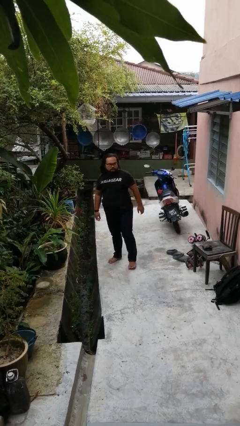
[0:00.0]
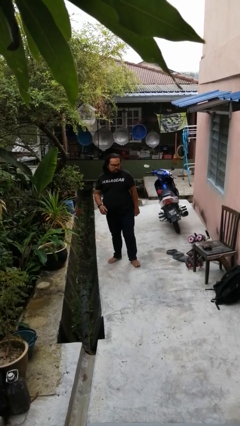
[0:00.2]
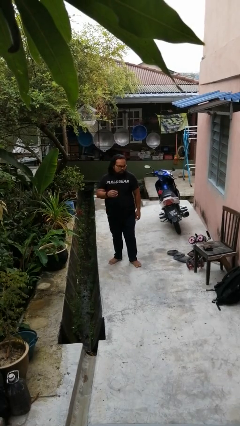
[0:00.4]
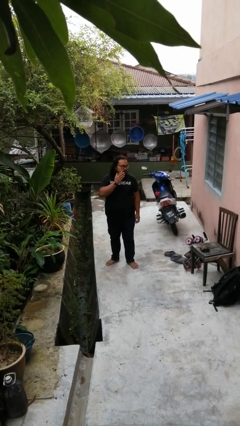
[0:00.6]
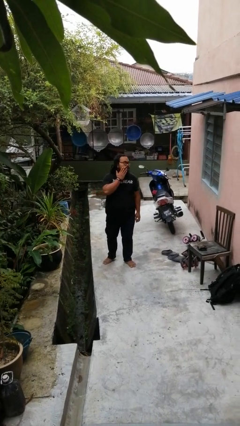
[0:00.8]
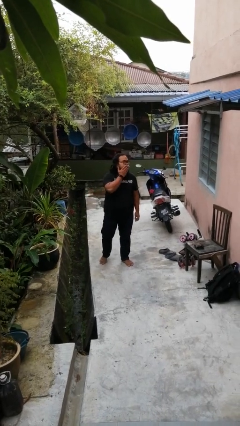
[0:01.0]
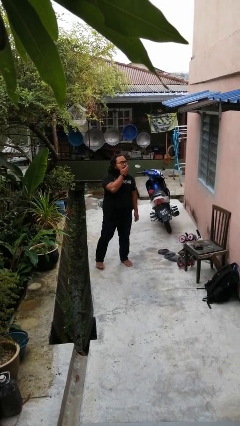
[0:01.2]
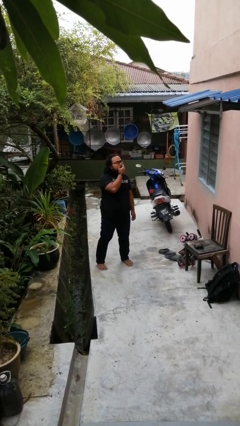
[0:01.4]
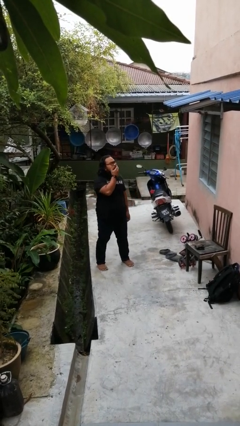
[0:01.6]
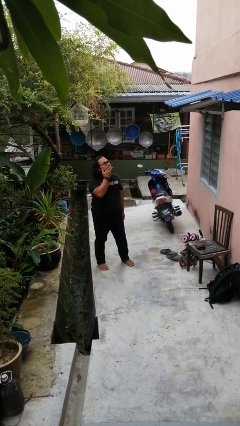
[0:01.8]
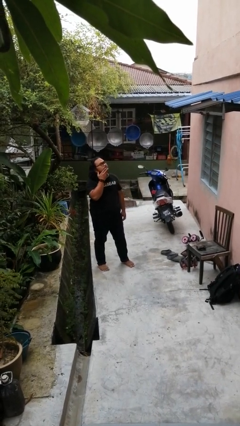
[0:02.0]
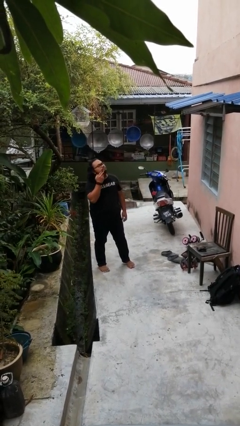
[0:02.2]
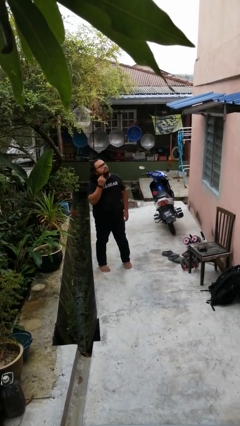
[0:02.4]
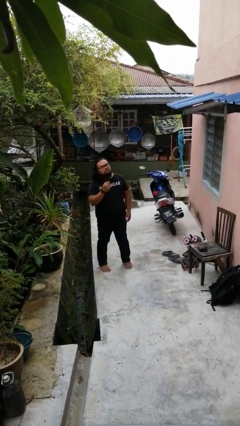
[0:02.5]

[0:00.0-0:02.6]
person scratches face

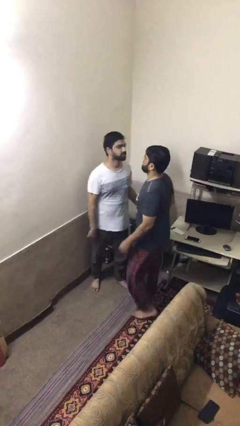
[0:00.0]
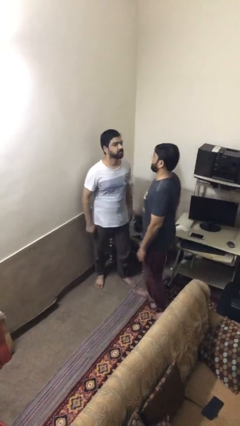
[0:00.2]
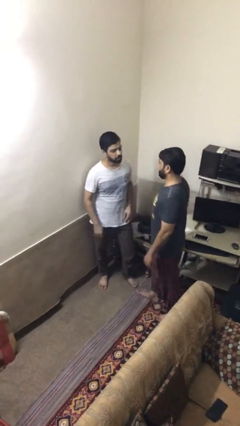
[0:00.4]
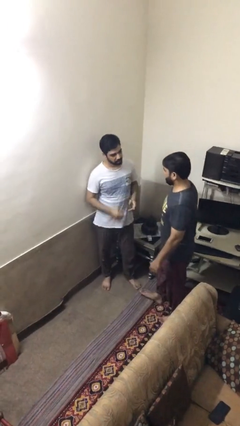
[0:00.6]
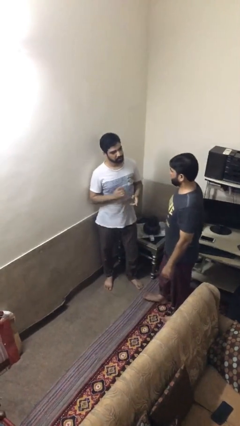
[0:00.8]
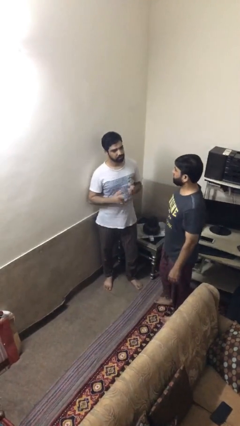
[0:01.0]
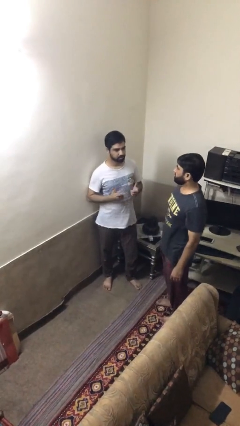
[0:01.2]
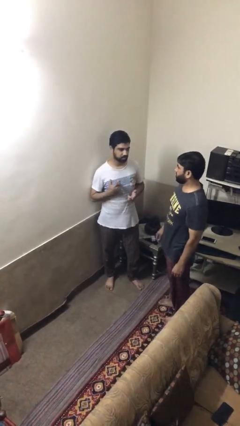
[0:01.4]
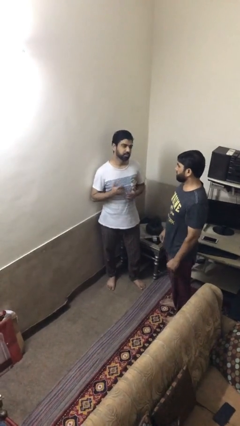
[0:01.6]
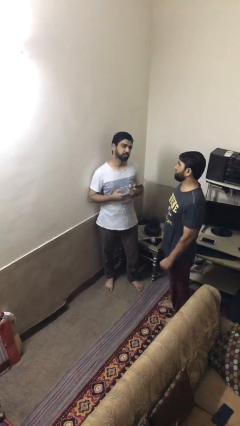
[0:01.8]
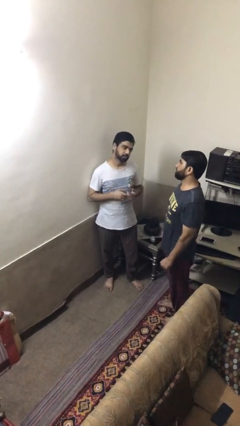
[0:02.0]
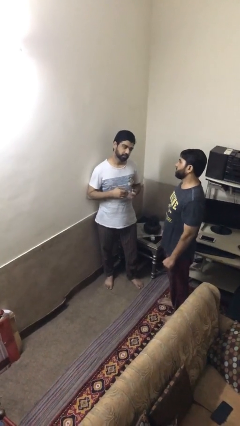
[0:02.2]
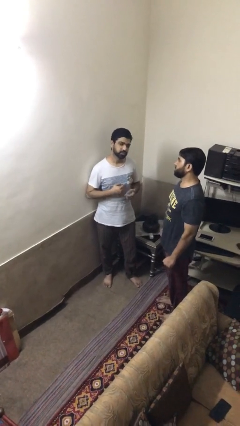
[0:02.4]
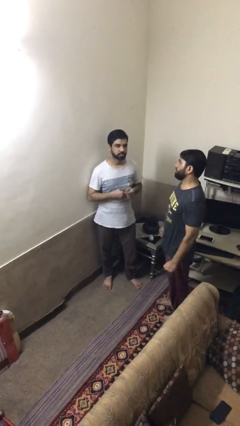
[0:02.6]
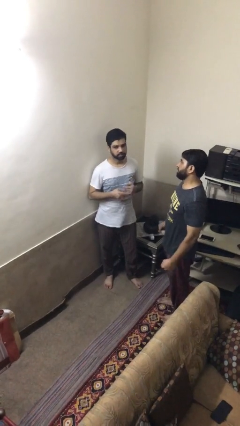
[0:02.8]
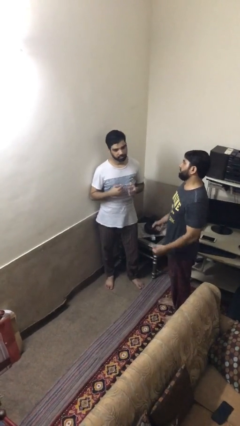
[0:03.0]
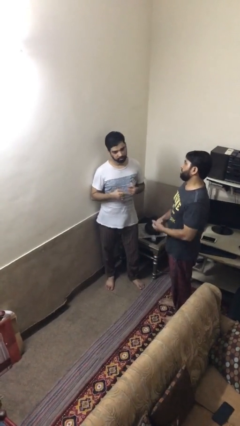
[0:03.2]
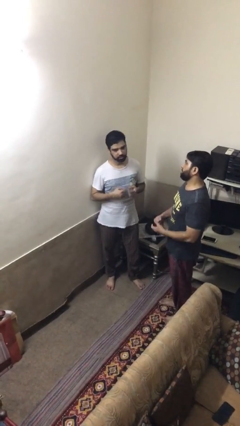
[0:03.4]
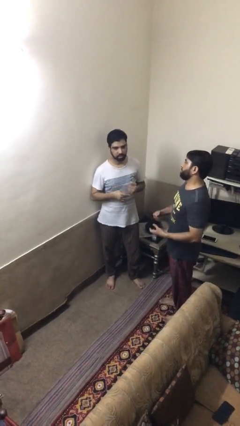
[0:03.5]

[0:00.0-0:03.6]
person talks to person

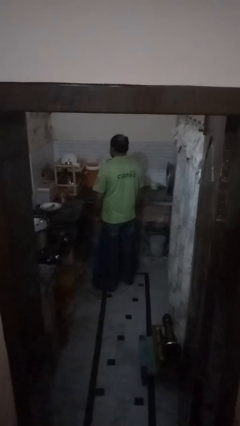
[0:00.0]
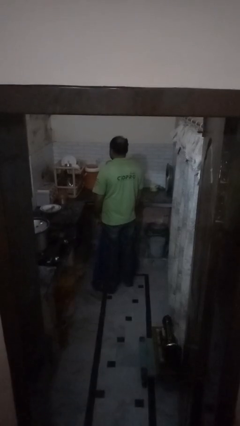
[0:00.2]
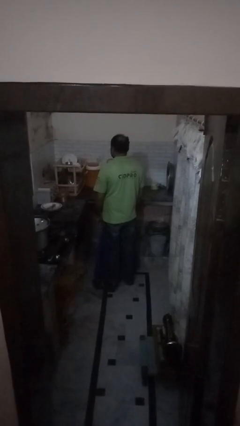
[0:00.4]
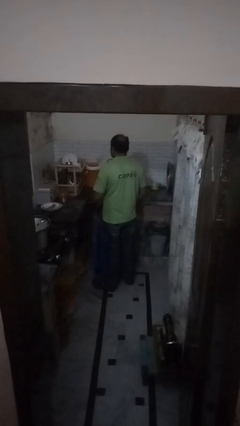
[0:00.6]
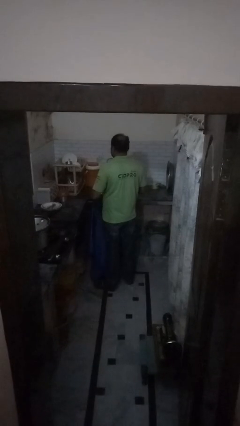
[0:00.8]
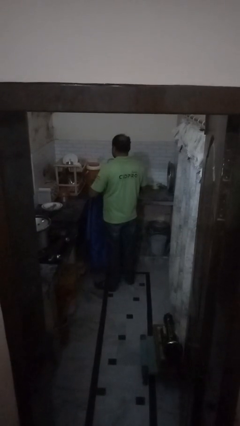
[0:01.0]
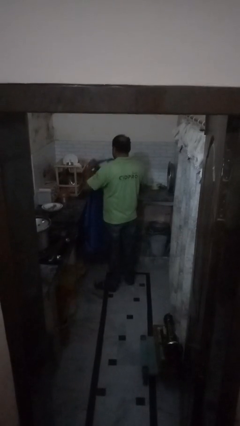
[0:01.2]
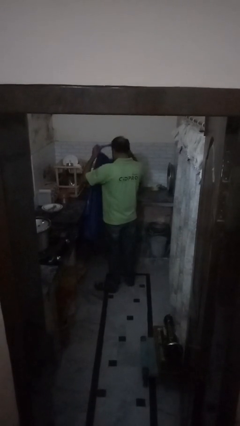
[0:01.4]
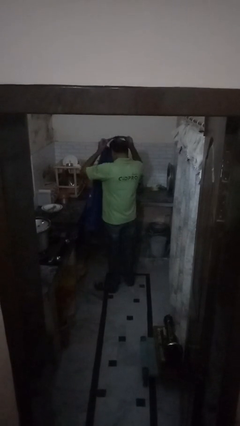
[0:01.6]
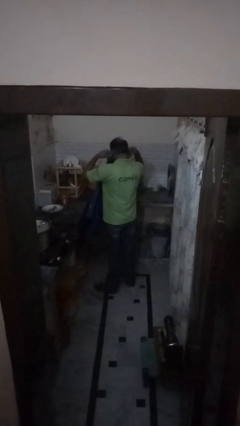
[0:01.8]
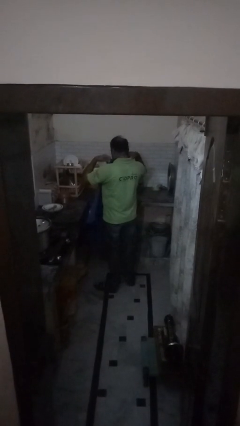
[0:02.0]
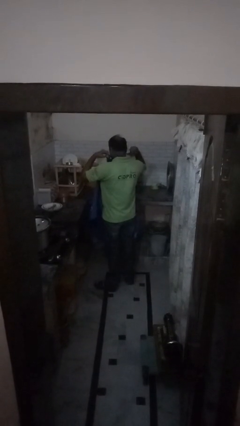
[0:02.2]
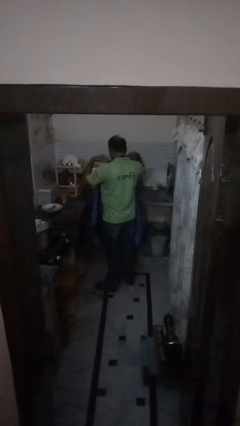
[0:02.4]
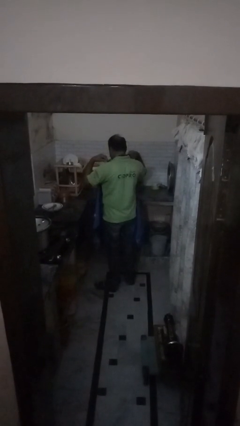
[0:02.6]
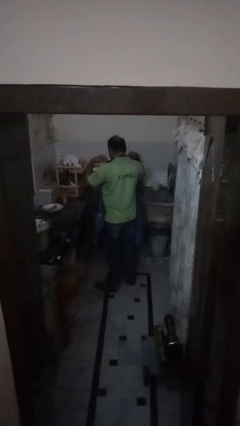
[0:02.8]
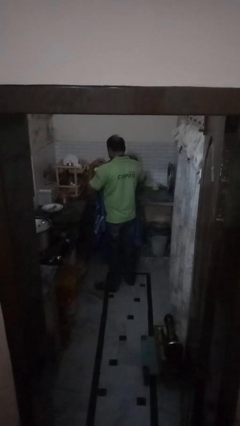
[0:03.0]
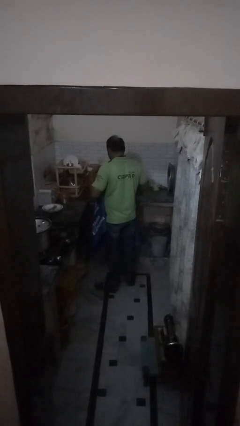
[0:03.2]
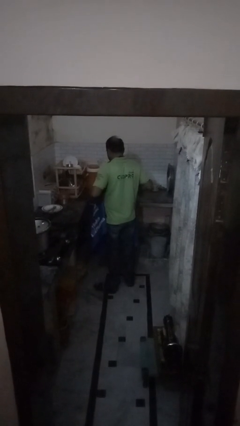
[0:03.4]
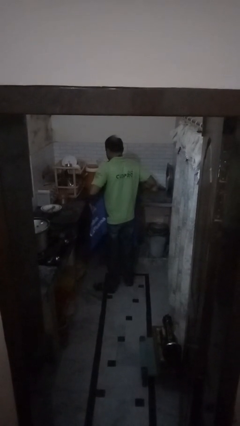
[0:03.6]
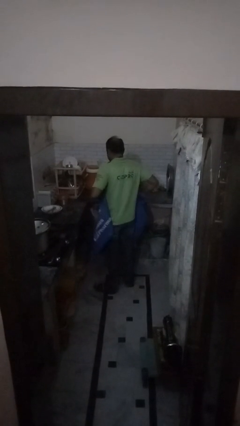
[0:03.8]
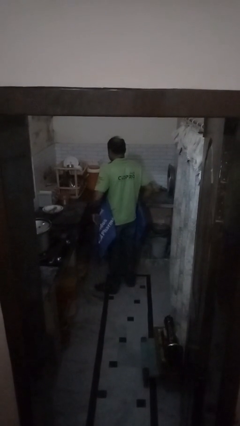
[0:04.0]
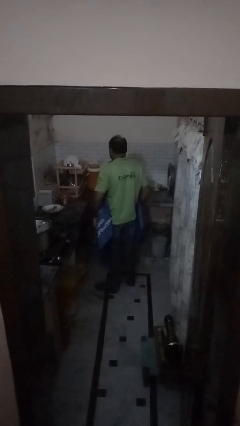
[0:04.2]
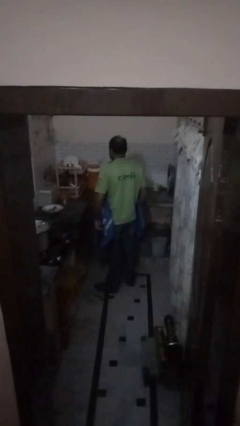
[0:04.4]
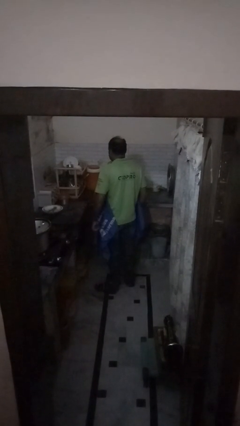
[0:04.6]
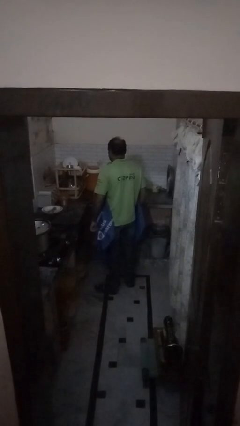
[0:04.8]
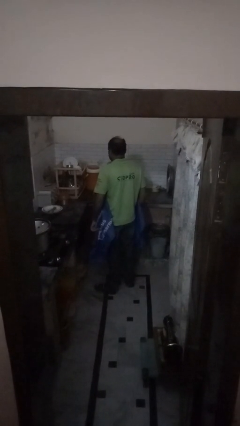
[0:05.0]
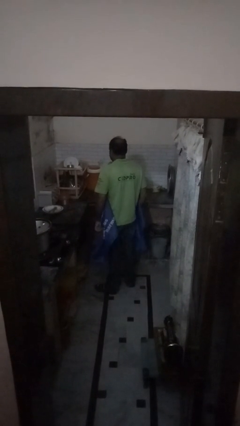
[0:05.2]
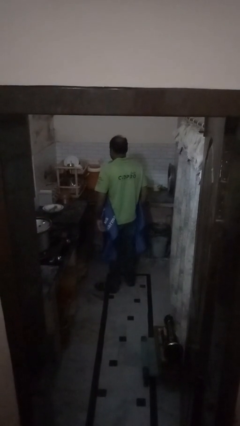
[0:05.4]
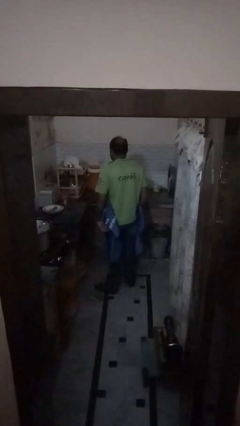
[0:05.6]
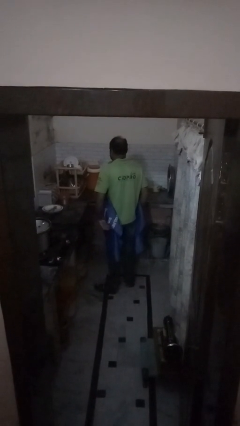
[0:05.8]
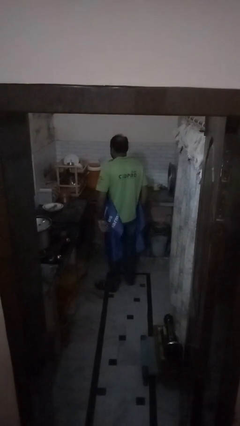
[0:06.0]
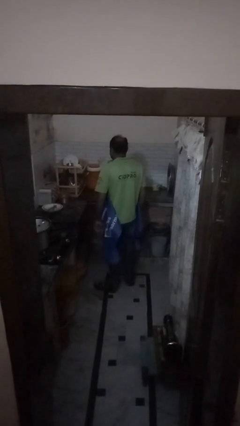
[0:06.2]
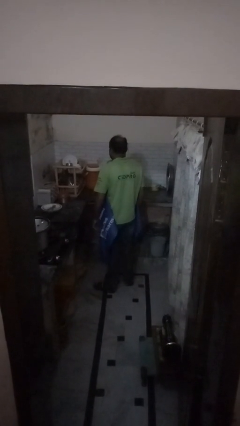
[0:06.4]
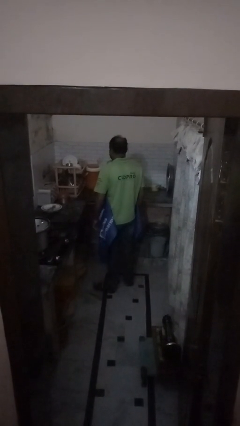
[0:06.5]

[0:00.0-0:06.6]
person puts on apron

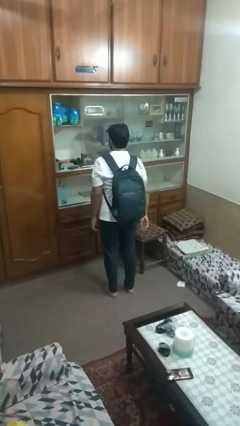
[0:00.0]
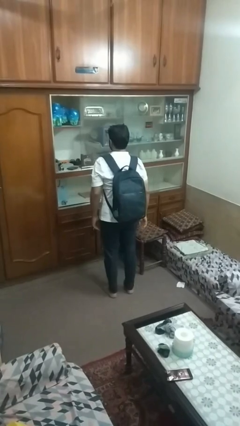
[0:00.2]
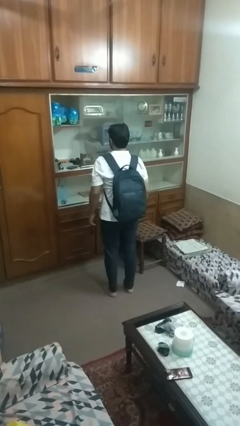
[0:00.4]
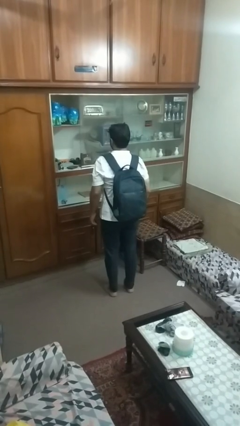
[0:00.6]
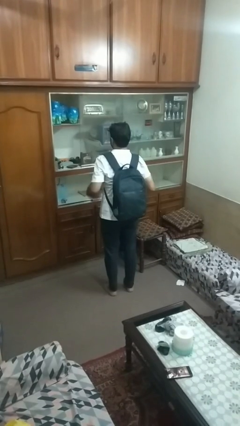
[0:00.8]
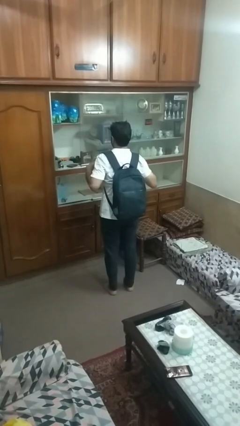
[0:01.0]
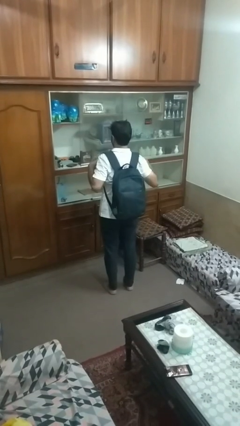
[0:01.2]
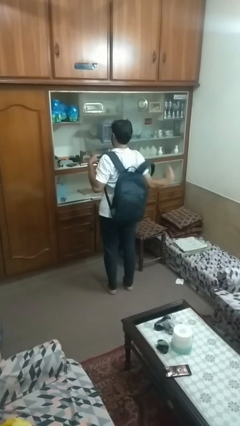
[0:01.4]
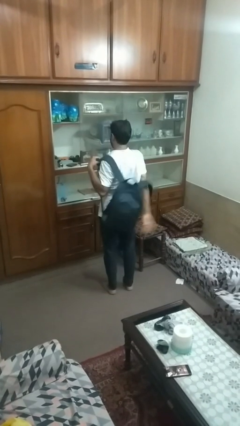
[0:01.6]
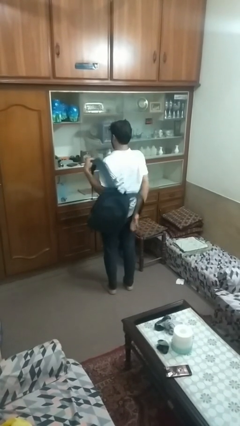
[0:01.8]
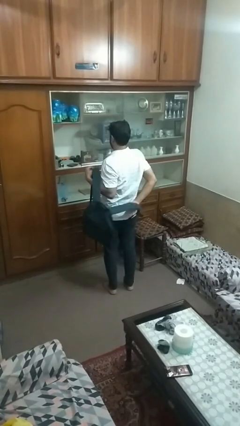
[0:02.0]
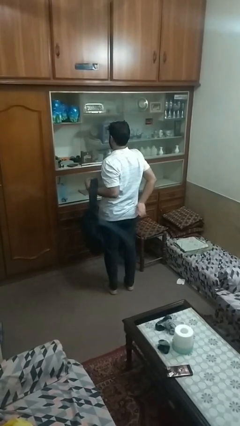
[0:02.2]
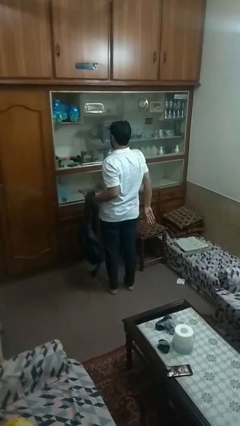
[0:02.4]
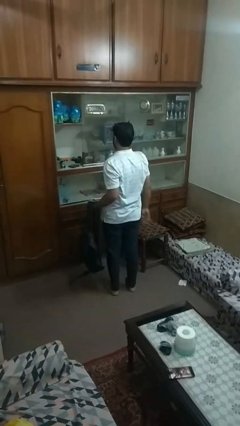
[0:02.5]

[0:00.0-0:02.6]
person takes off backpack

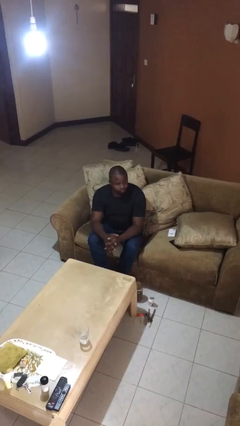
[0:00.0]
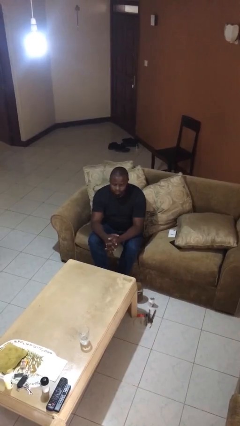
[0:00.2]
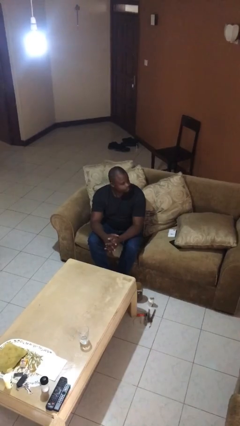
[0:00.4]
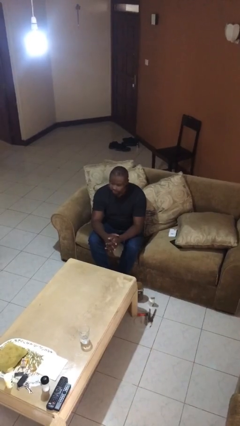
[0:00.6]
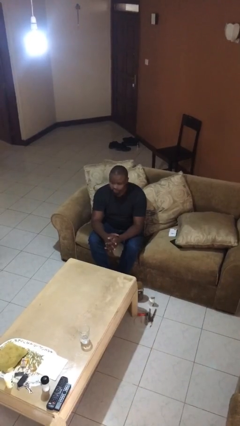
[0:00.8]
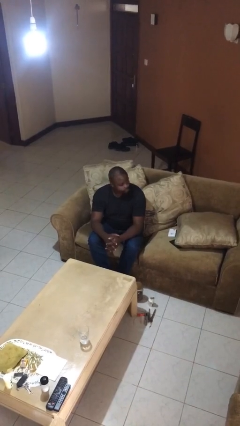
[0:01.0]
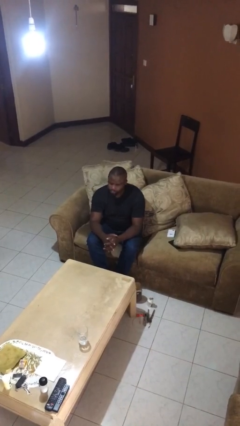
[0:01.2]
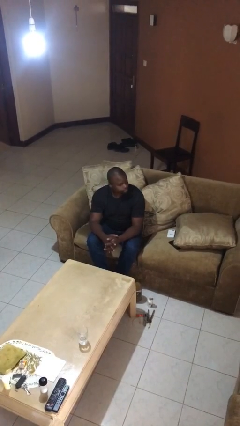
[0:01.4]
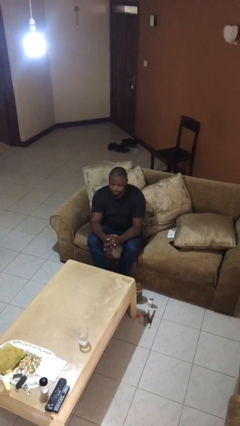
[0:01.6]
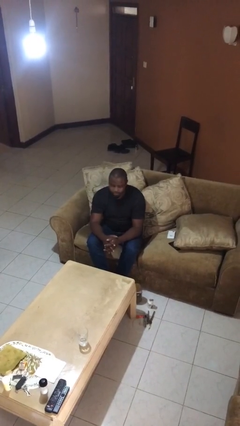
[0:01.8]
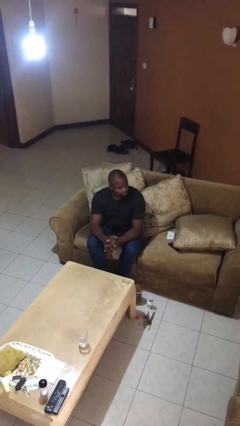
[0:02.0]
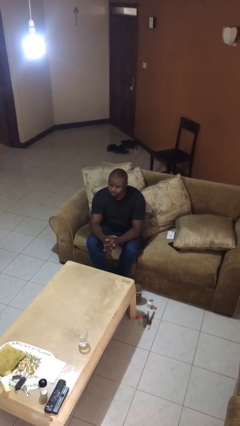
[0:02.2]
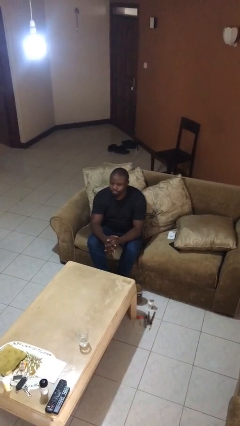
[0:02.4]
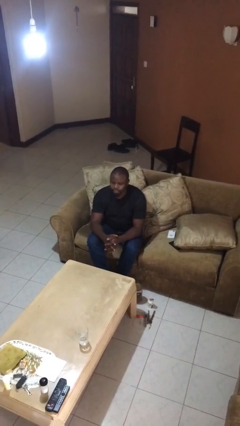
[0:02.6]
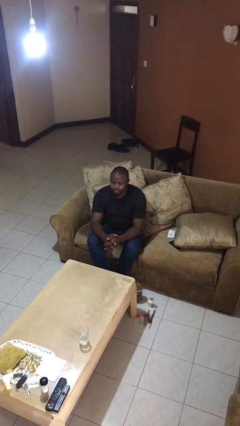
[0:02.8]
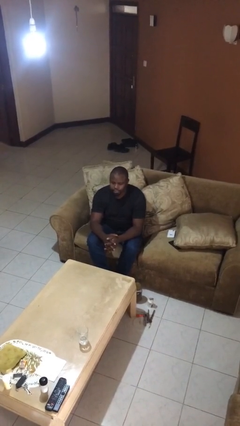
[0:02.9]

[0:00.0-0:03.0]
person shakes head
